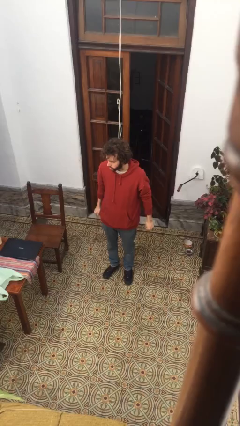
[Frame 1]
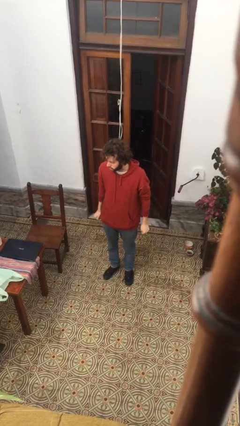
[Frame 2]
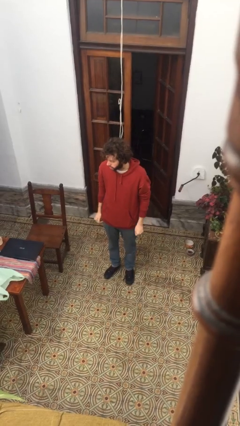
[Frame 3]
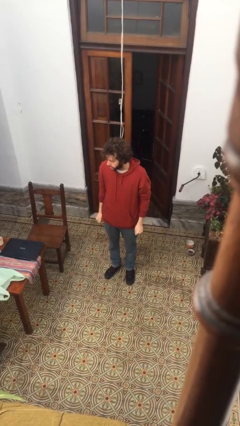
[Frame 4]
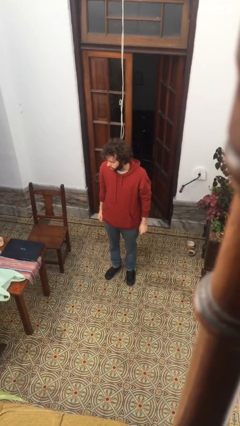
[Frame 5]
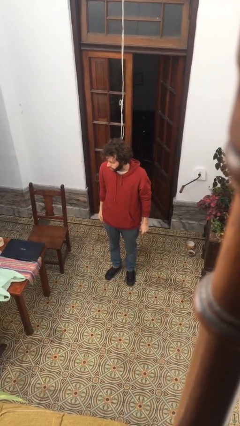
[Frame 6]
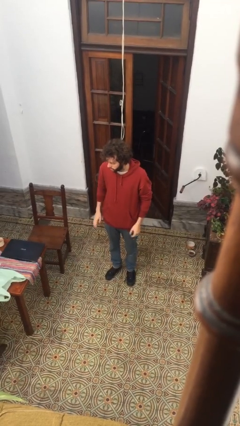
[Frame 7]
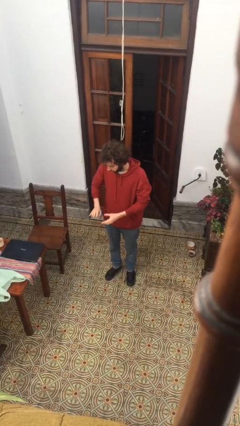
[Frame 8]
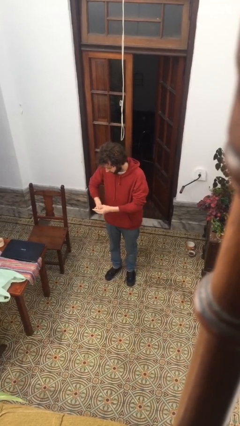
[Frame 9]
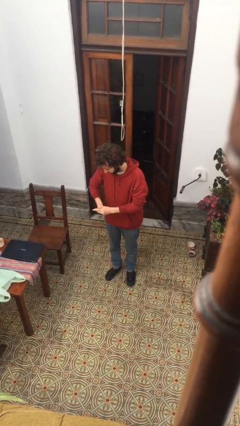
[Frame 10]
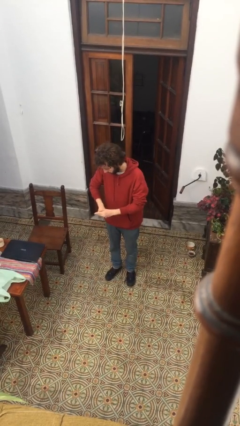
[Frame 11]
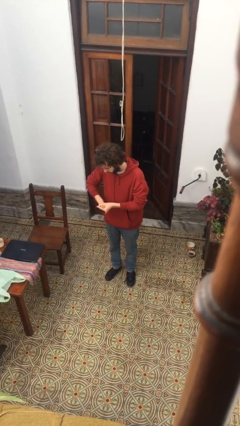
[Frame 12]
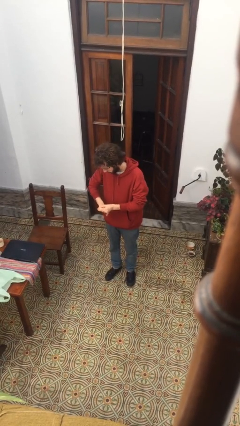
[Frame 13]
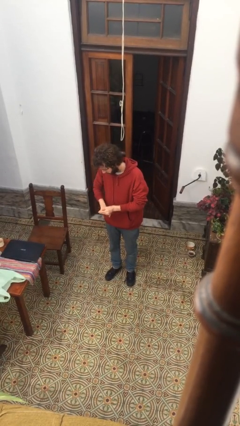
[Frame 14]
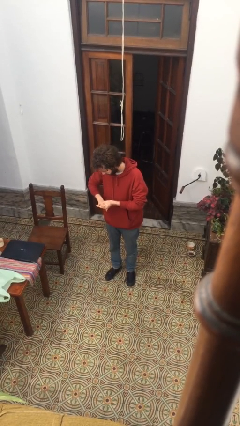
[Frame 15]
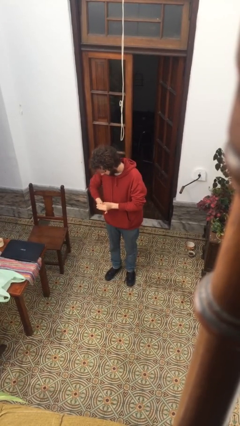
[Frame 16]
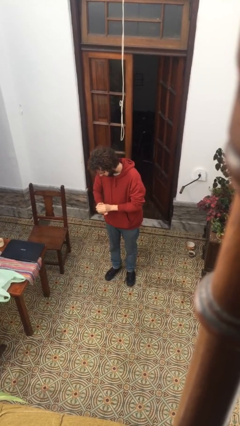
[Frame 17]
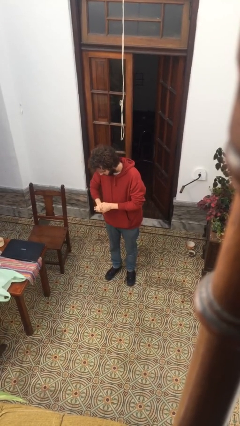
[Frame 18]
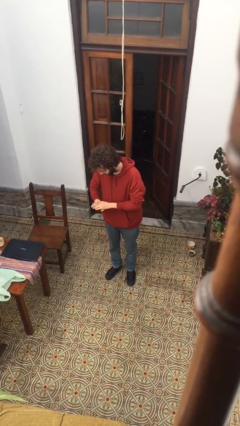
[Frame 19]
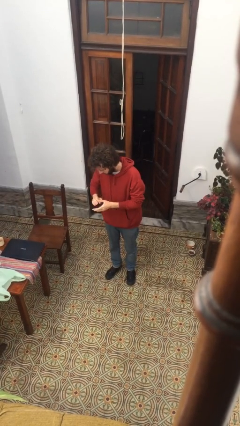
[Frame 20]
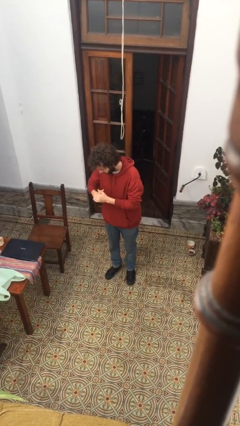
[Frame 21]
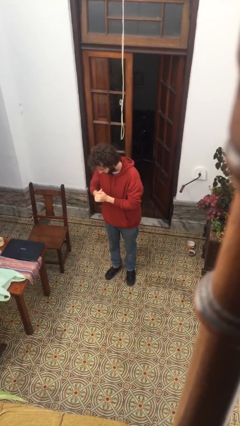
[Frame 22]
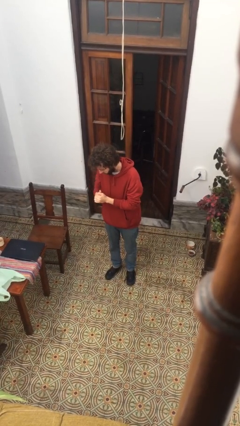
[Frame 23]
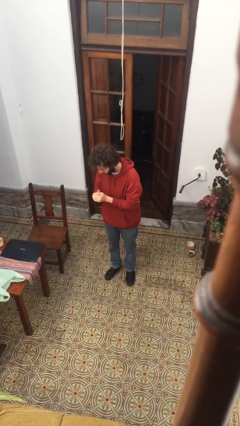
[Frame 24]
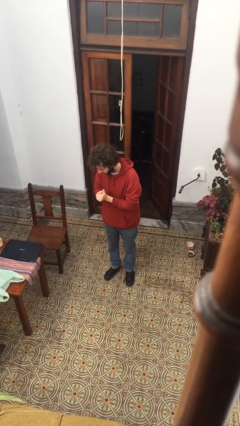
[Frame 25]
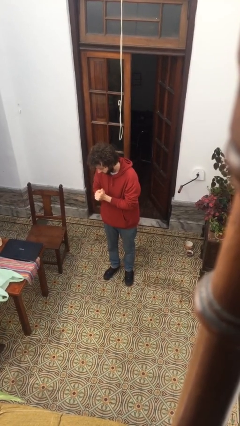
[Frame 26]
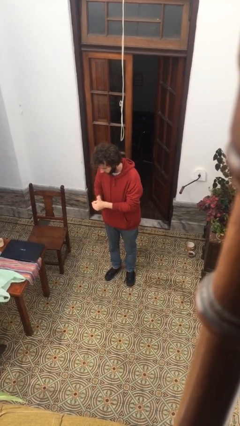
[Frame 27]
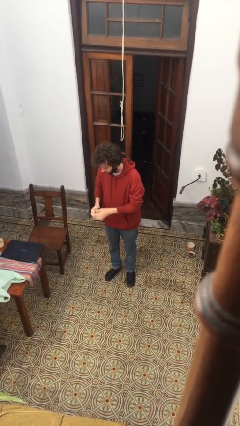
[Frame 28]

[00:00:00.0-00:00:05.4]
person cracks knuckles

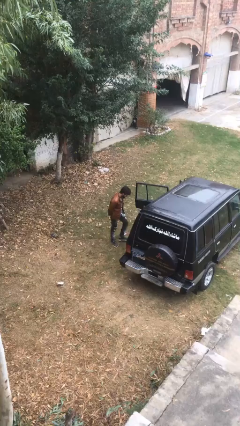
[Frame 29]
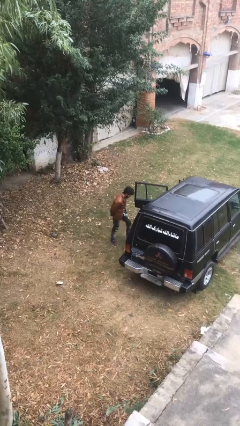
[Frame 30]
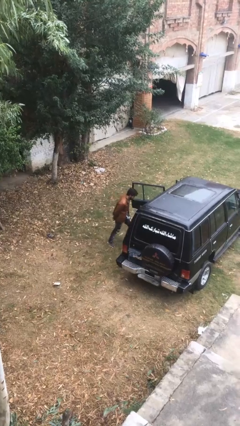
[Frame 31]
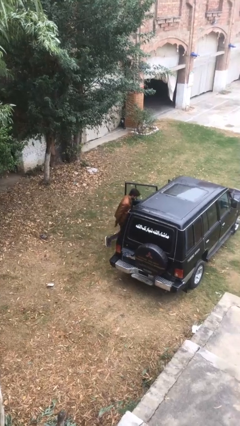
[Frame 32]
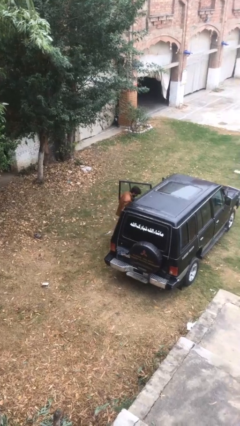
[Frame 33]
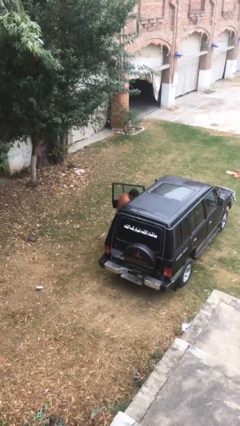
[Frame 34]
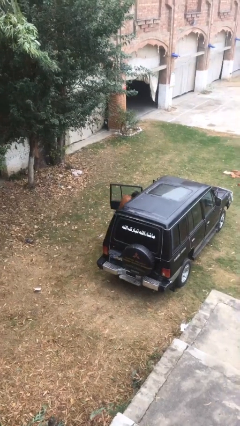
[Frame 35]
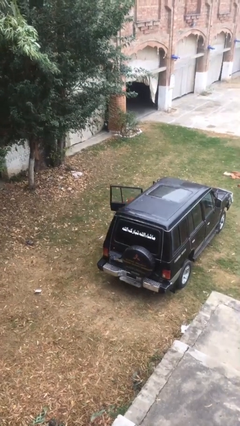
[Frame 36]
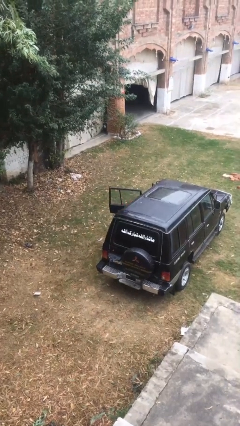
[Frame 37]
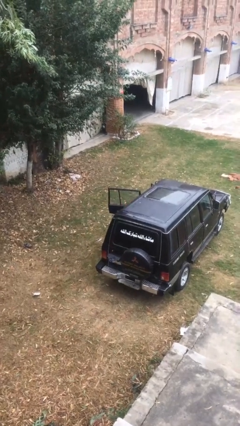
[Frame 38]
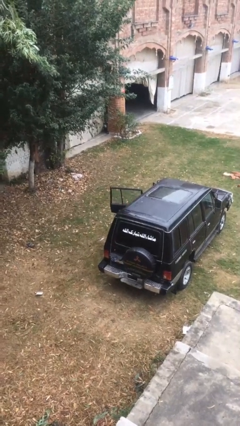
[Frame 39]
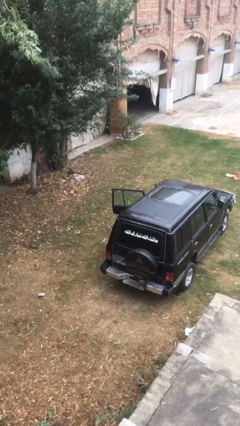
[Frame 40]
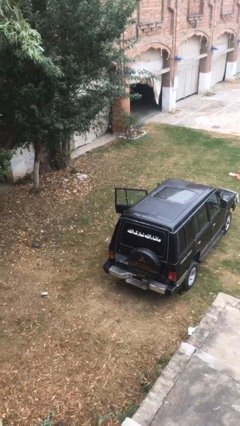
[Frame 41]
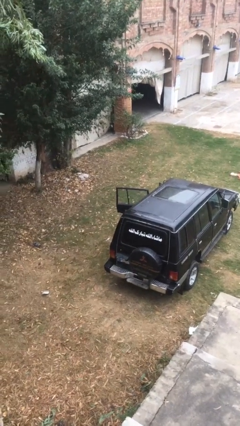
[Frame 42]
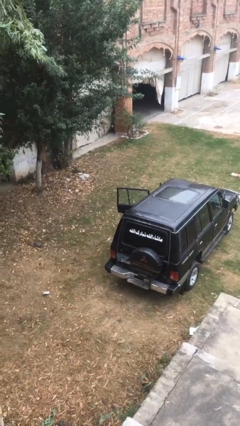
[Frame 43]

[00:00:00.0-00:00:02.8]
person enters car

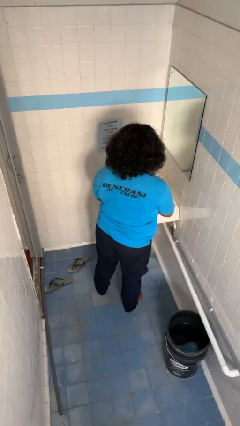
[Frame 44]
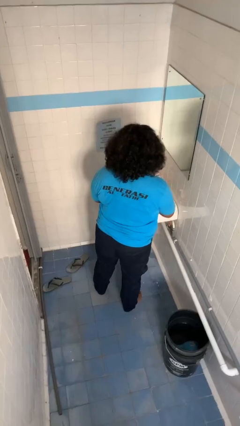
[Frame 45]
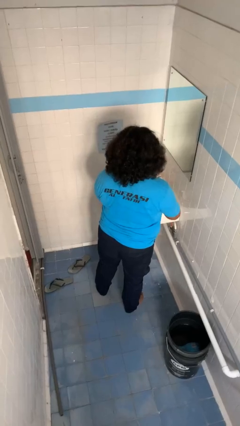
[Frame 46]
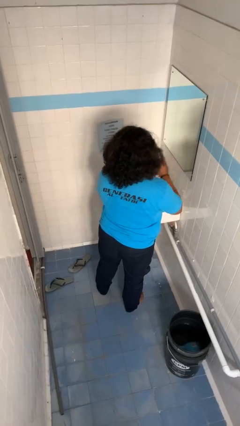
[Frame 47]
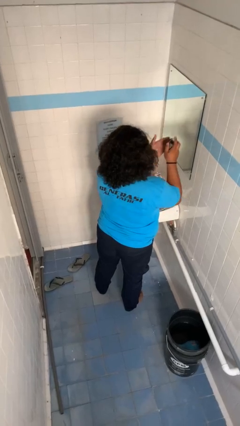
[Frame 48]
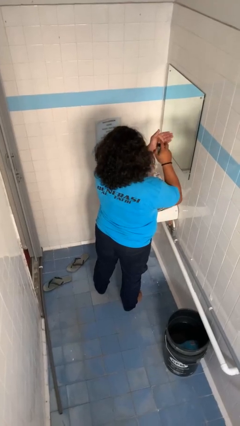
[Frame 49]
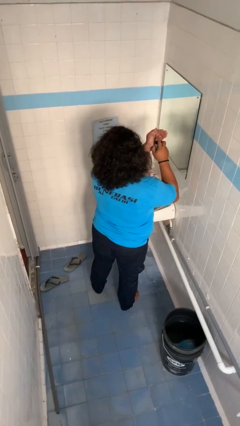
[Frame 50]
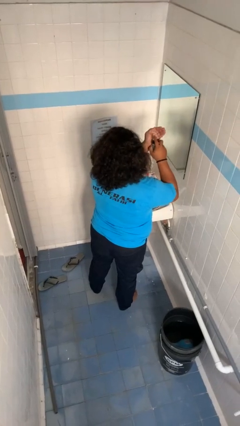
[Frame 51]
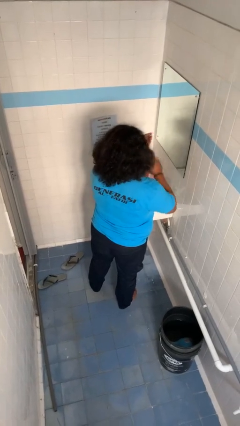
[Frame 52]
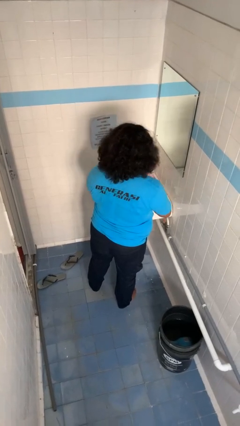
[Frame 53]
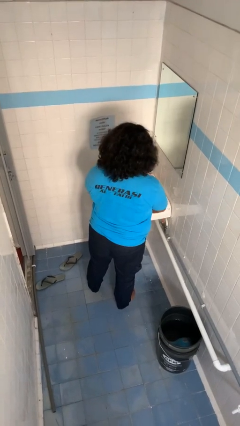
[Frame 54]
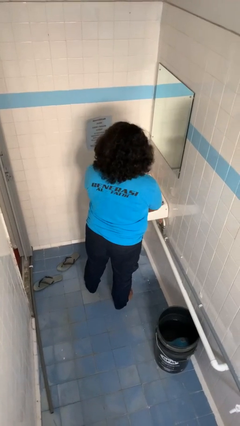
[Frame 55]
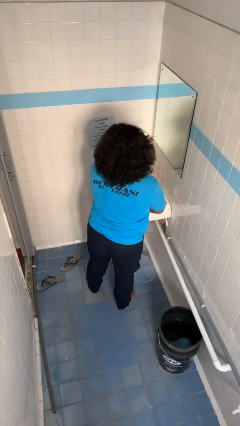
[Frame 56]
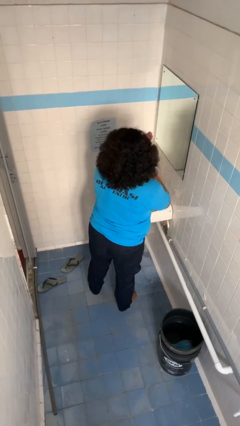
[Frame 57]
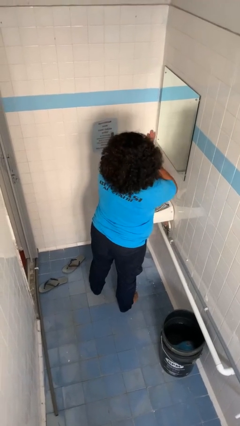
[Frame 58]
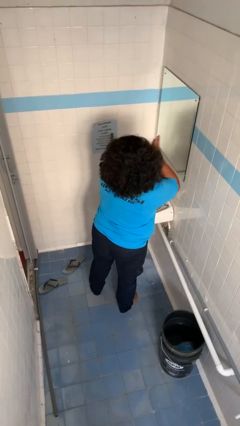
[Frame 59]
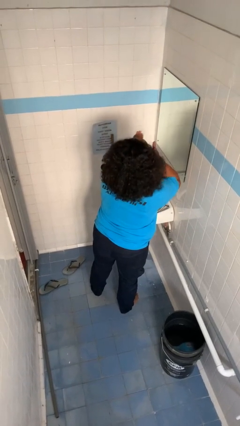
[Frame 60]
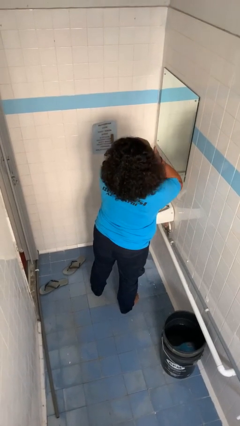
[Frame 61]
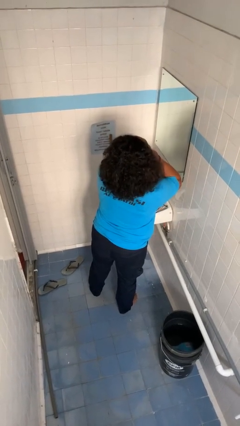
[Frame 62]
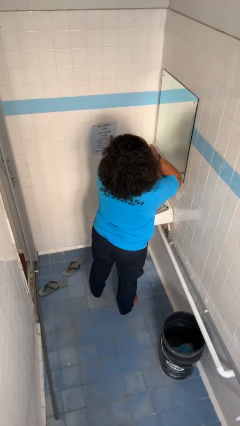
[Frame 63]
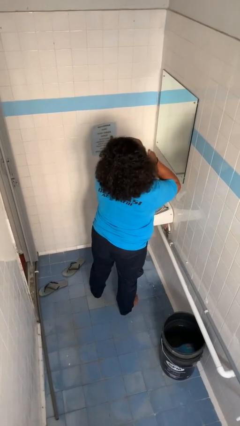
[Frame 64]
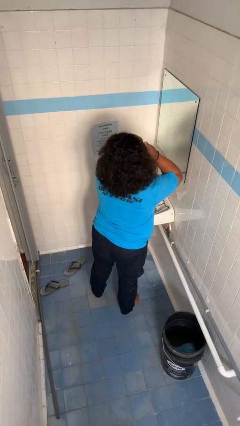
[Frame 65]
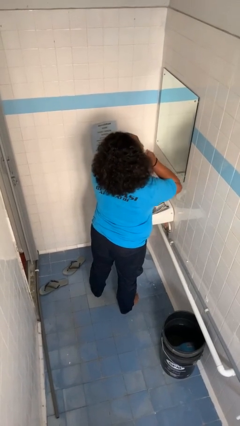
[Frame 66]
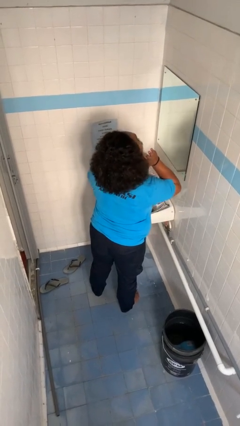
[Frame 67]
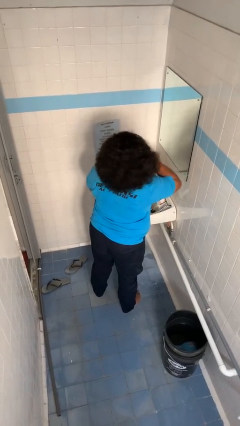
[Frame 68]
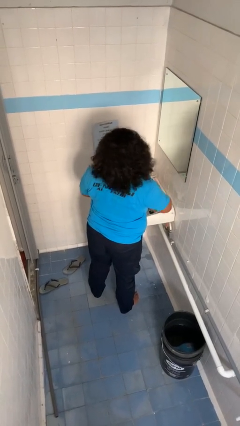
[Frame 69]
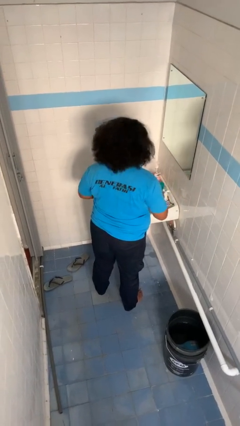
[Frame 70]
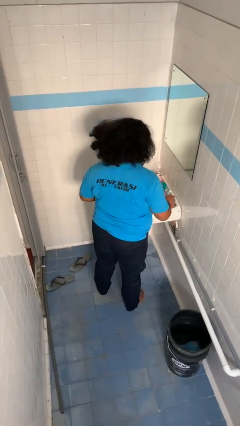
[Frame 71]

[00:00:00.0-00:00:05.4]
person applies shaving cream

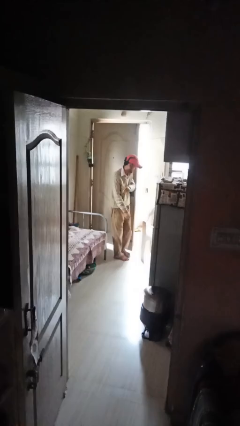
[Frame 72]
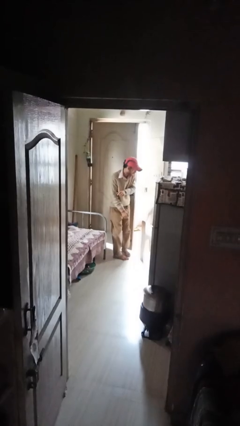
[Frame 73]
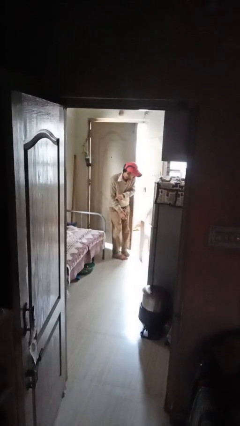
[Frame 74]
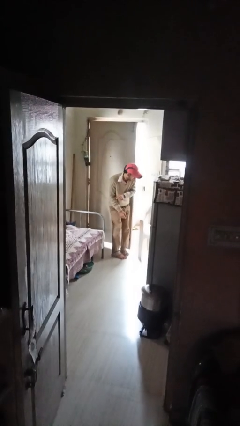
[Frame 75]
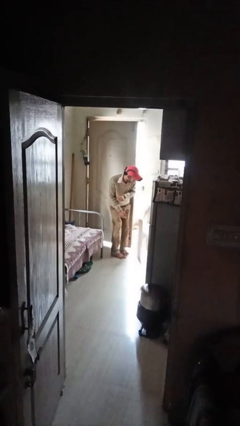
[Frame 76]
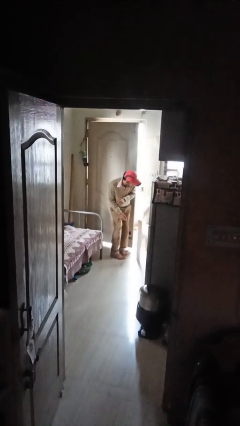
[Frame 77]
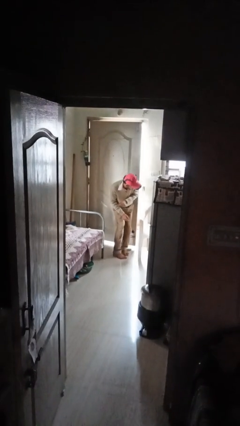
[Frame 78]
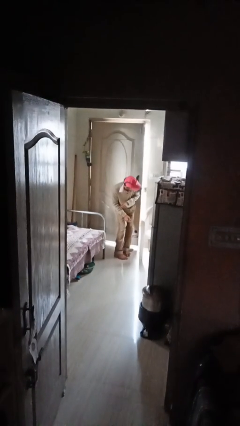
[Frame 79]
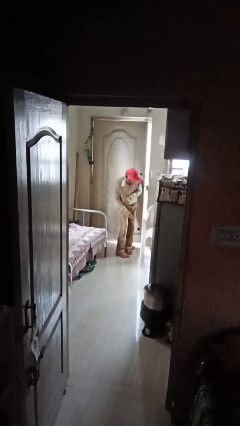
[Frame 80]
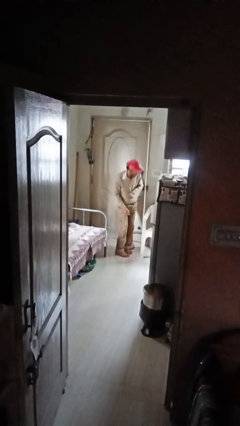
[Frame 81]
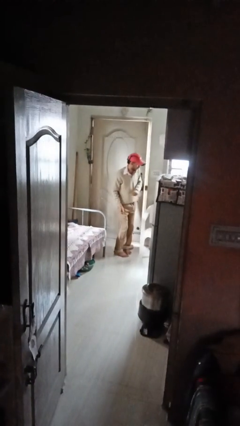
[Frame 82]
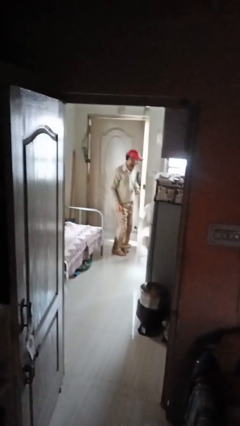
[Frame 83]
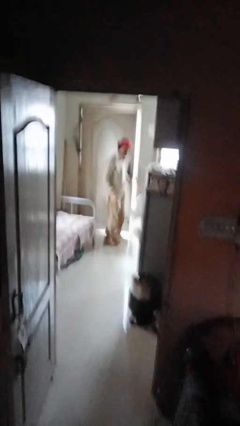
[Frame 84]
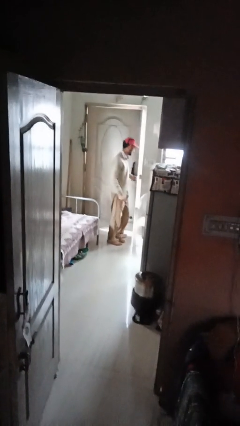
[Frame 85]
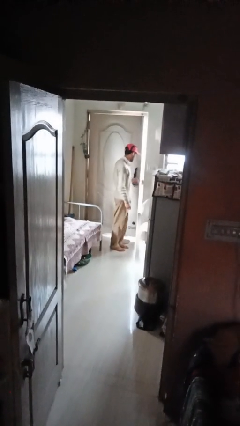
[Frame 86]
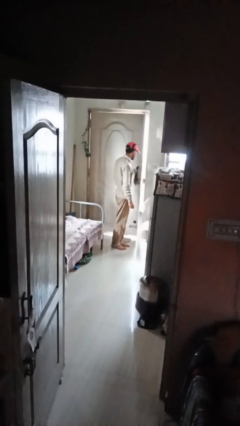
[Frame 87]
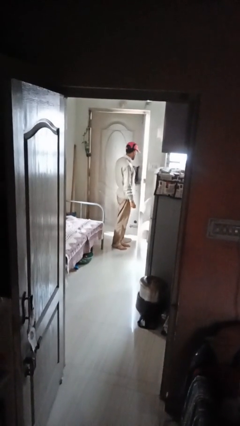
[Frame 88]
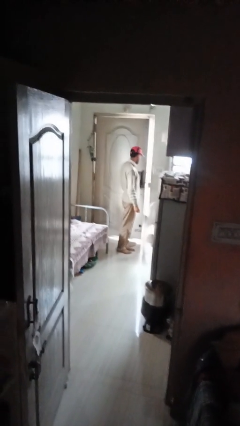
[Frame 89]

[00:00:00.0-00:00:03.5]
person closes door with hip

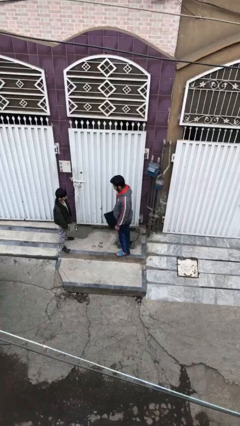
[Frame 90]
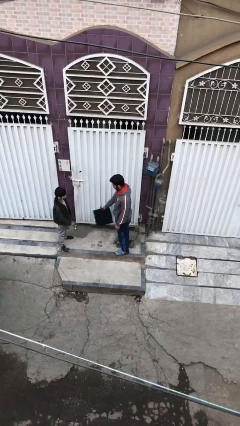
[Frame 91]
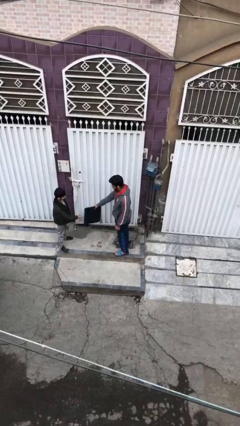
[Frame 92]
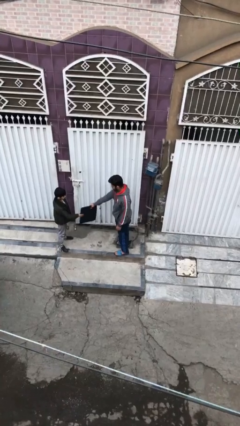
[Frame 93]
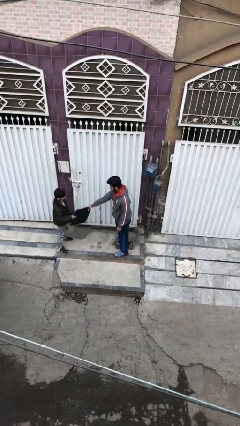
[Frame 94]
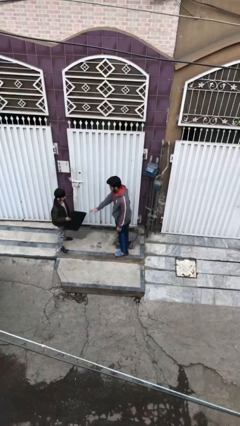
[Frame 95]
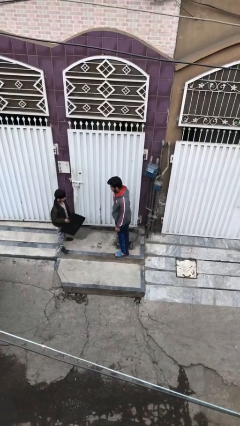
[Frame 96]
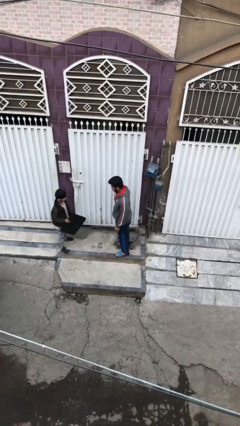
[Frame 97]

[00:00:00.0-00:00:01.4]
person transfers object to person
